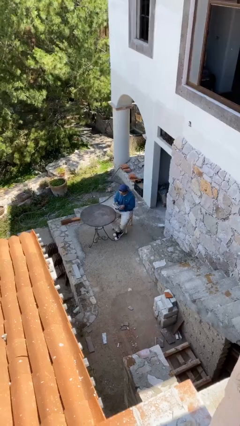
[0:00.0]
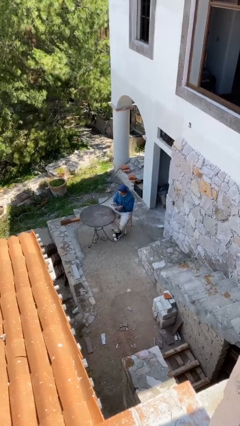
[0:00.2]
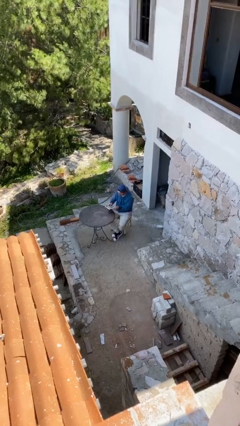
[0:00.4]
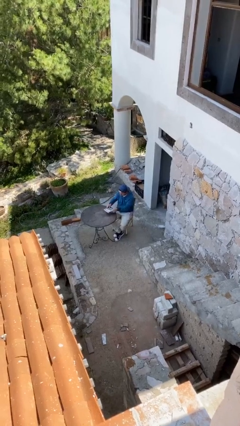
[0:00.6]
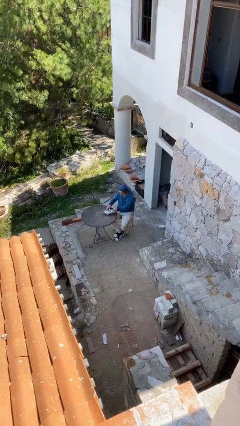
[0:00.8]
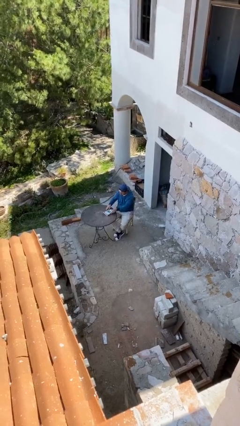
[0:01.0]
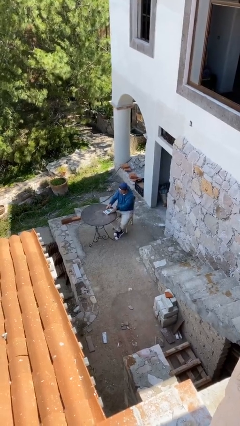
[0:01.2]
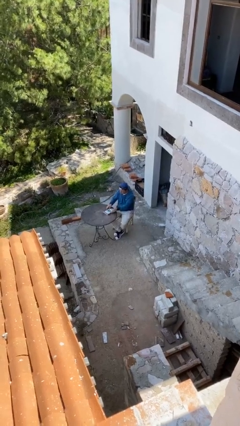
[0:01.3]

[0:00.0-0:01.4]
person puts down object on table

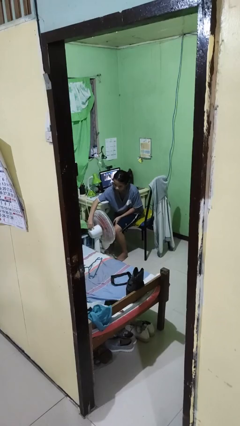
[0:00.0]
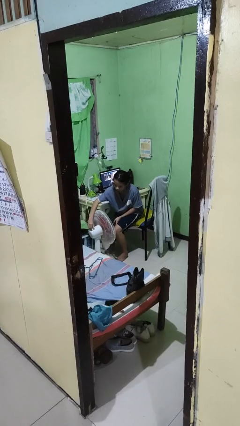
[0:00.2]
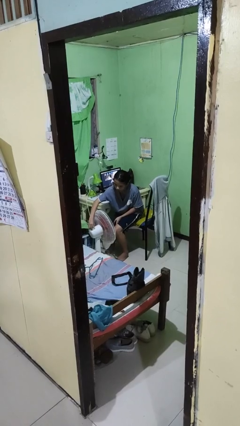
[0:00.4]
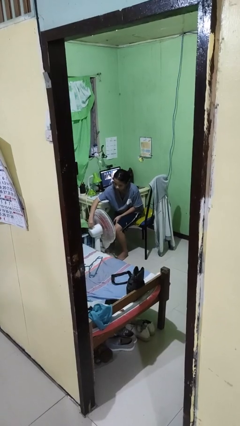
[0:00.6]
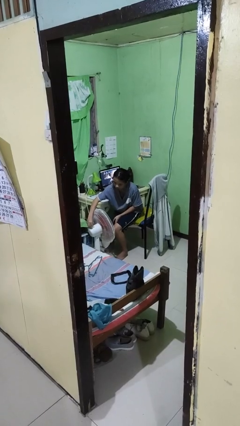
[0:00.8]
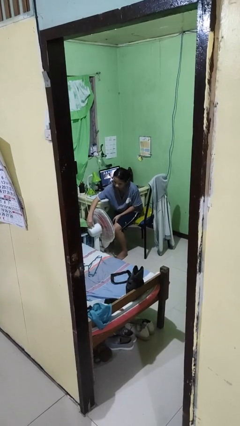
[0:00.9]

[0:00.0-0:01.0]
person turns off fan

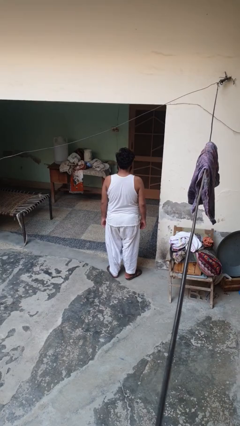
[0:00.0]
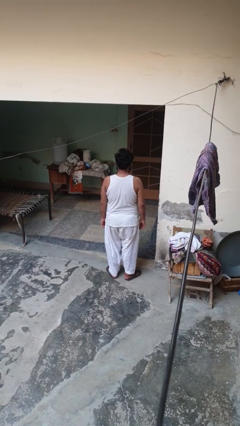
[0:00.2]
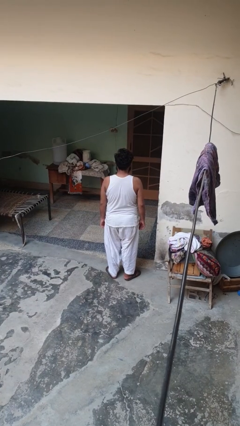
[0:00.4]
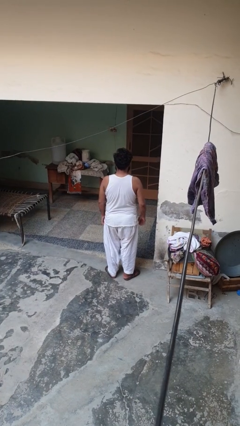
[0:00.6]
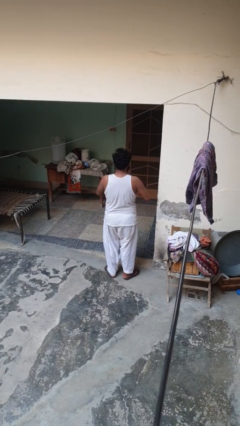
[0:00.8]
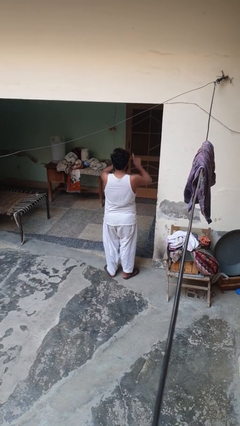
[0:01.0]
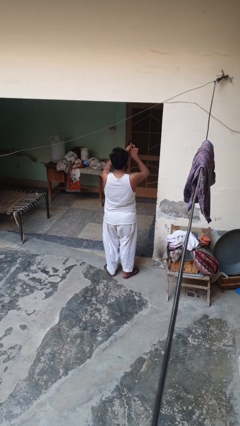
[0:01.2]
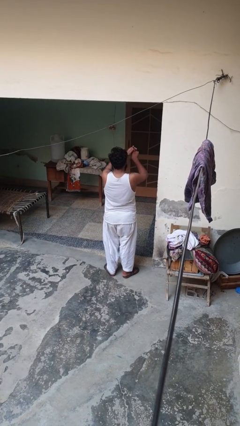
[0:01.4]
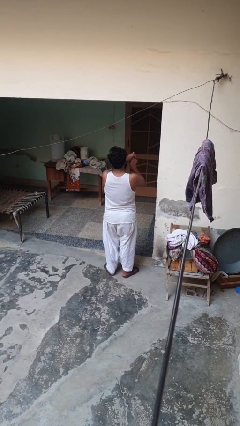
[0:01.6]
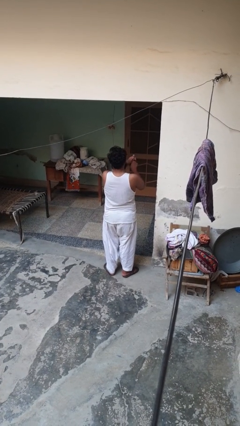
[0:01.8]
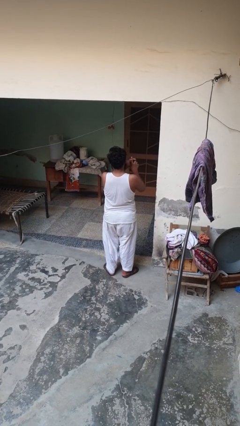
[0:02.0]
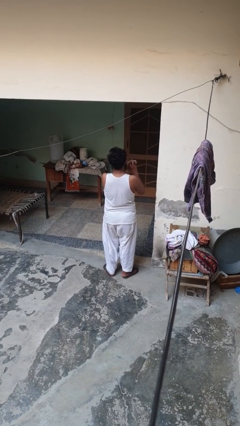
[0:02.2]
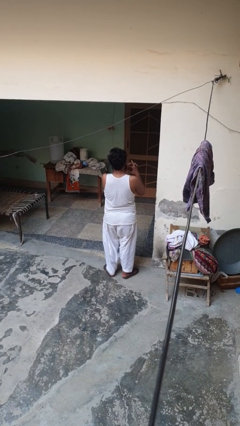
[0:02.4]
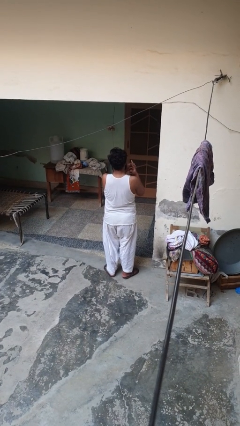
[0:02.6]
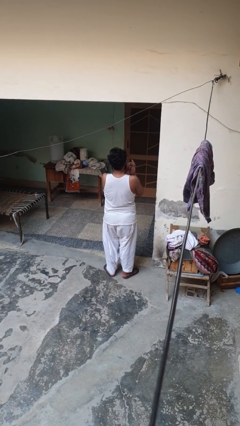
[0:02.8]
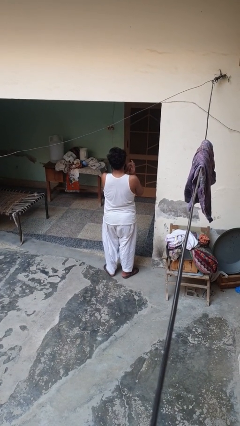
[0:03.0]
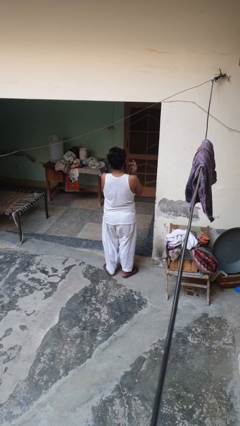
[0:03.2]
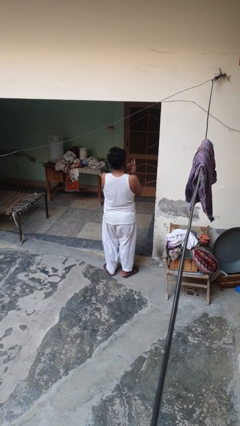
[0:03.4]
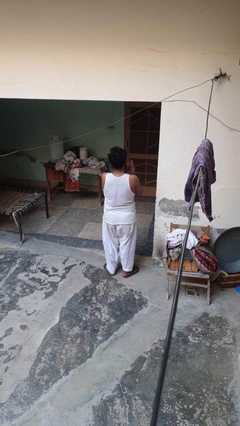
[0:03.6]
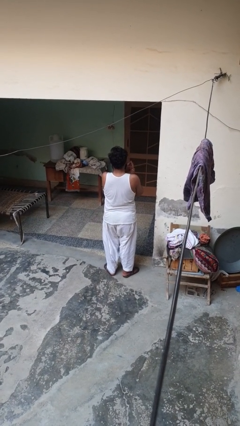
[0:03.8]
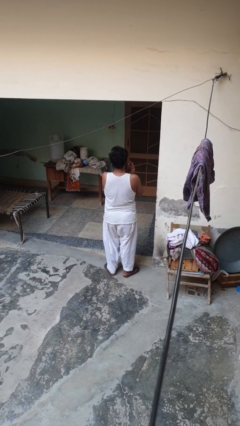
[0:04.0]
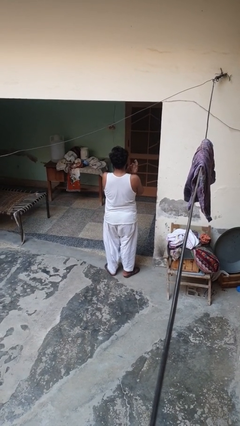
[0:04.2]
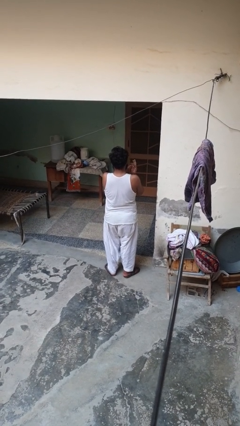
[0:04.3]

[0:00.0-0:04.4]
person snaps fingers

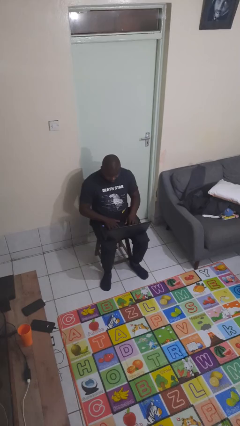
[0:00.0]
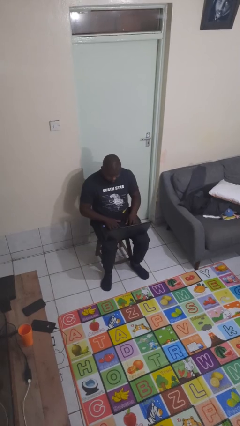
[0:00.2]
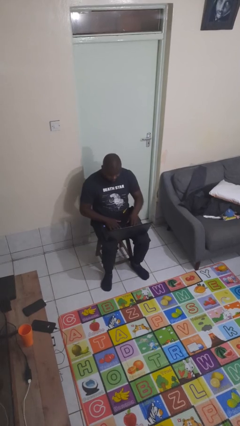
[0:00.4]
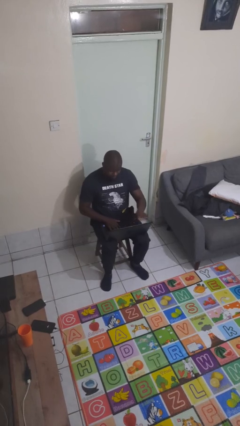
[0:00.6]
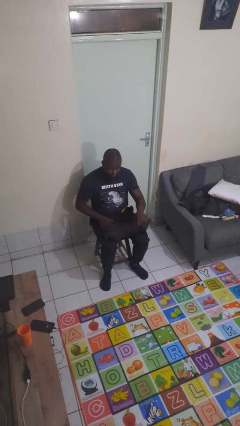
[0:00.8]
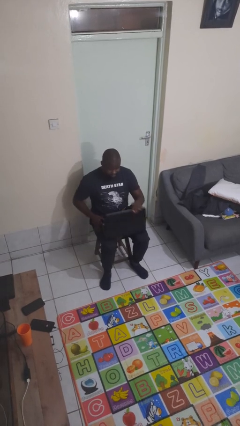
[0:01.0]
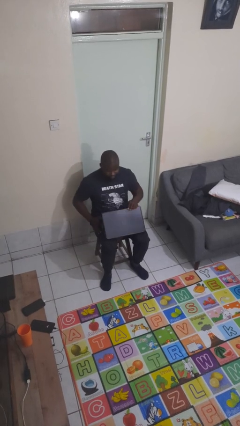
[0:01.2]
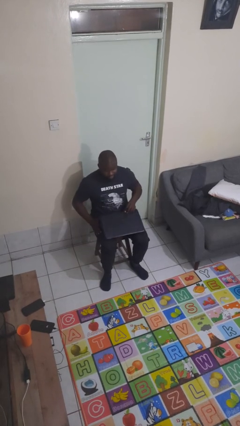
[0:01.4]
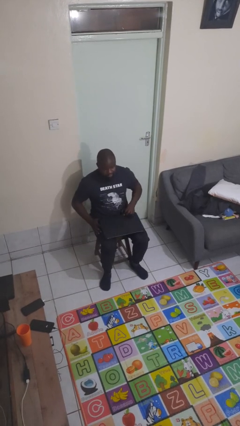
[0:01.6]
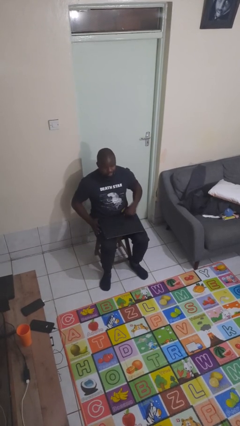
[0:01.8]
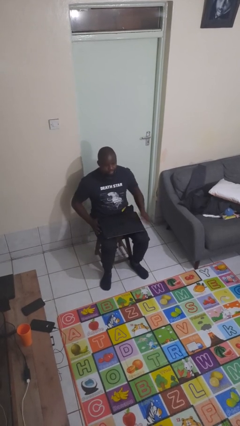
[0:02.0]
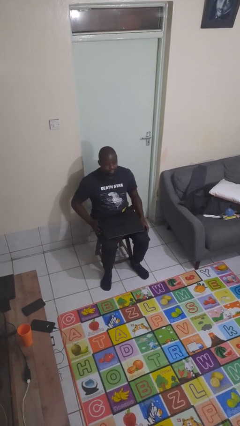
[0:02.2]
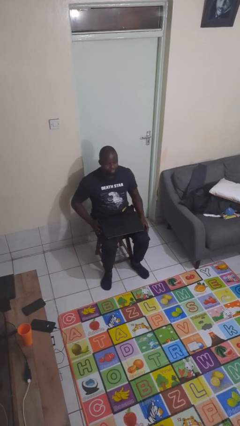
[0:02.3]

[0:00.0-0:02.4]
person closes laptop

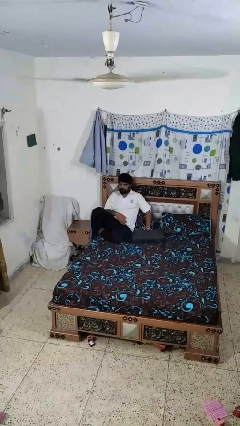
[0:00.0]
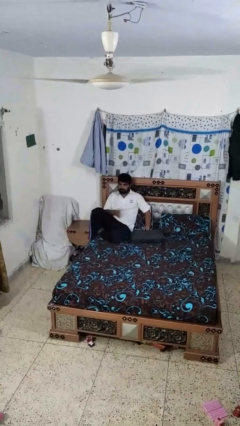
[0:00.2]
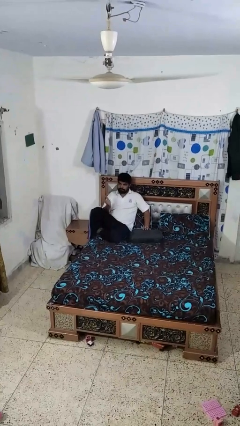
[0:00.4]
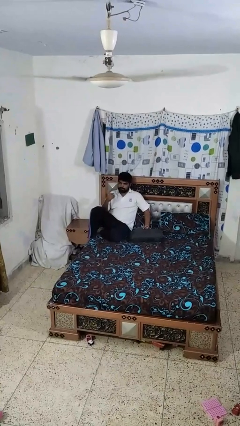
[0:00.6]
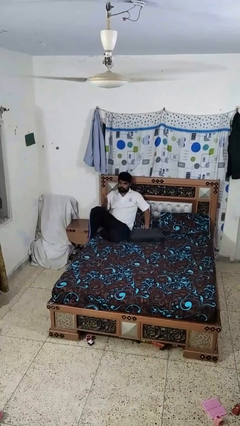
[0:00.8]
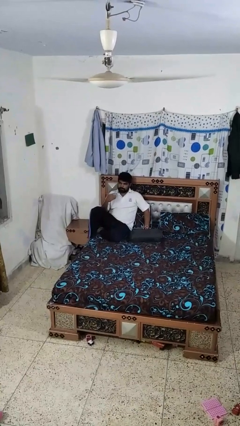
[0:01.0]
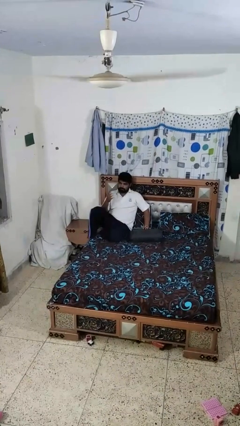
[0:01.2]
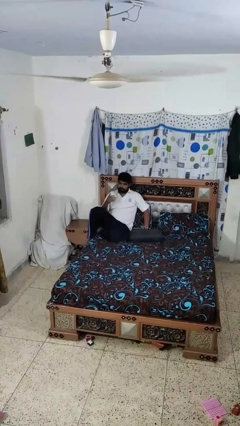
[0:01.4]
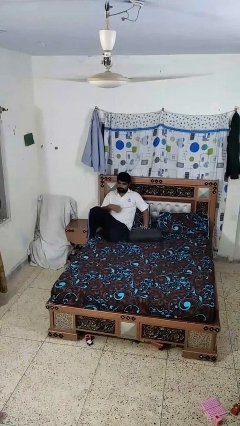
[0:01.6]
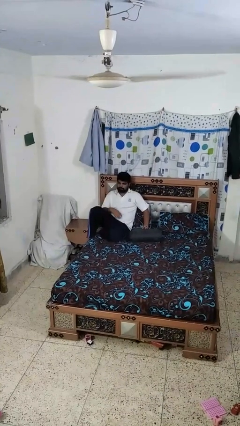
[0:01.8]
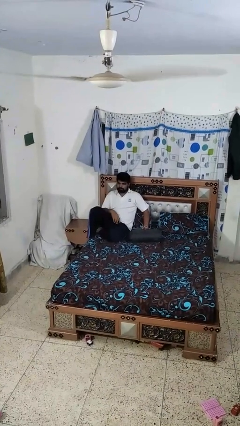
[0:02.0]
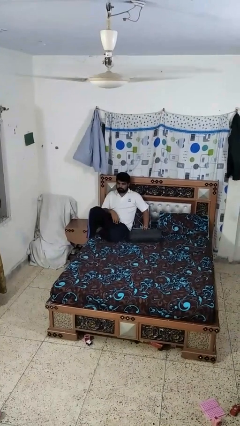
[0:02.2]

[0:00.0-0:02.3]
person gestures come here

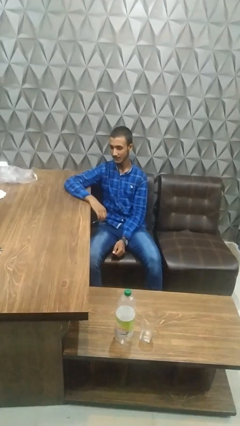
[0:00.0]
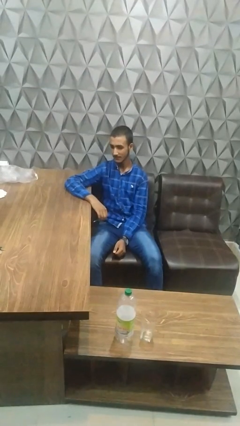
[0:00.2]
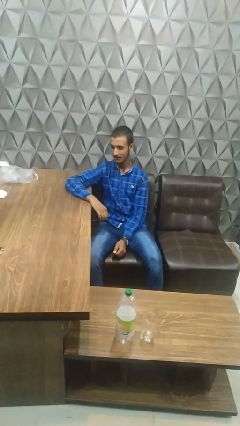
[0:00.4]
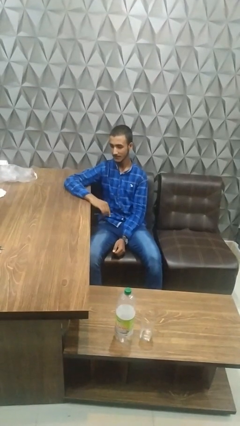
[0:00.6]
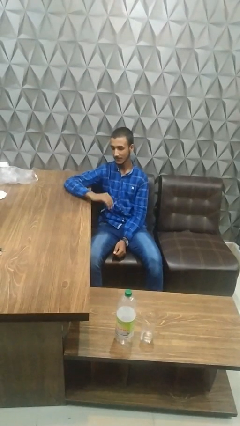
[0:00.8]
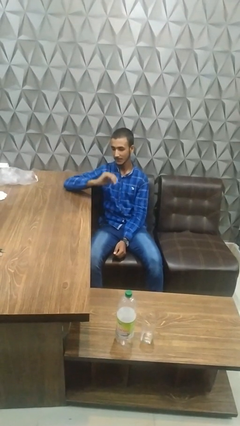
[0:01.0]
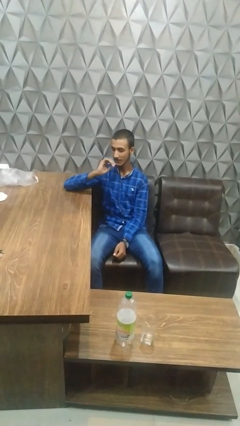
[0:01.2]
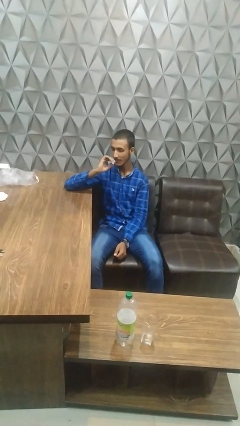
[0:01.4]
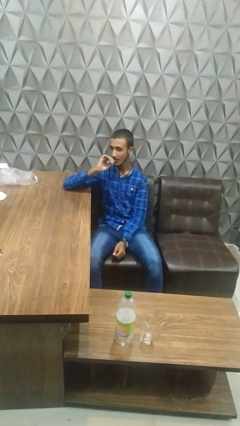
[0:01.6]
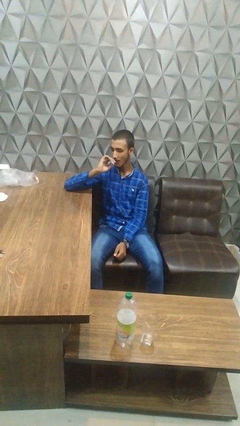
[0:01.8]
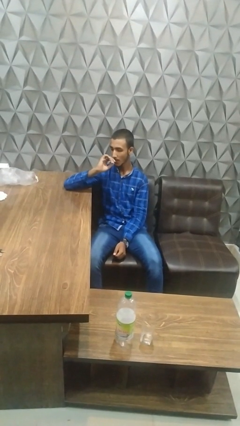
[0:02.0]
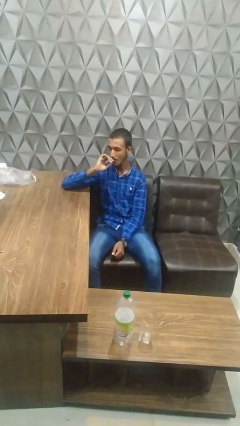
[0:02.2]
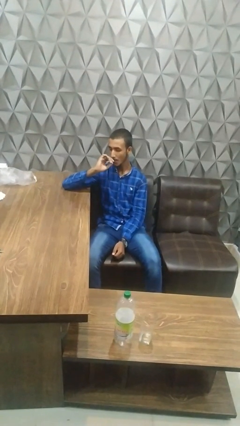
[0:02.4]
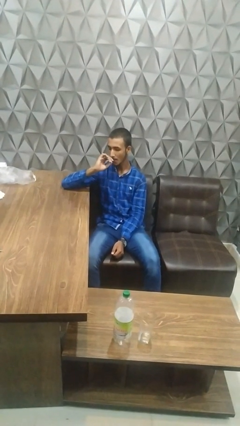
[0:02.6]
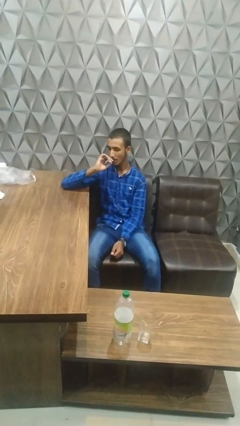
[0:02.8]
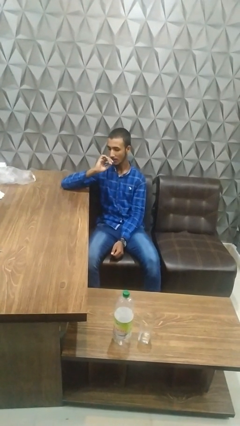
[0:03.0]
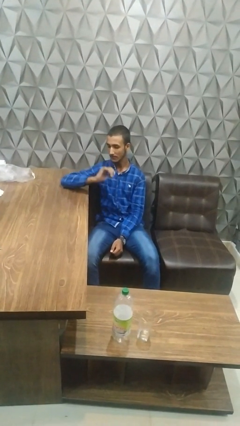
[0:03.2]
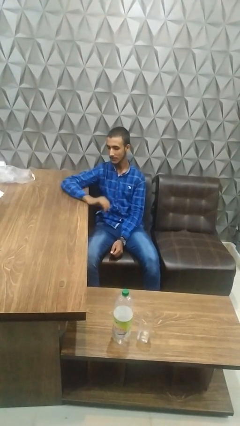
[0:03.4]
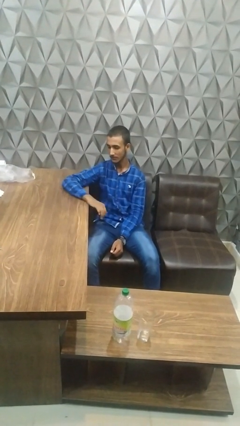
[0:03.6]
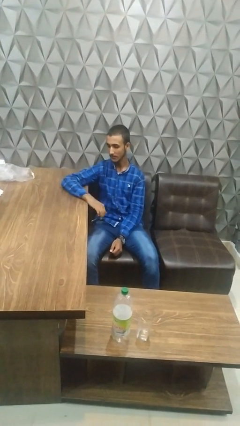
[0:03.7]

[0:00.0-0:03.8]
person vapes

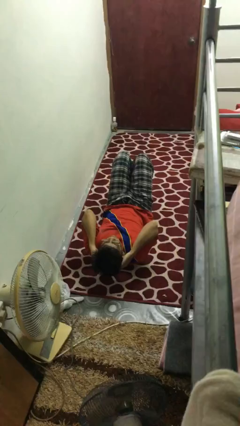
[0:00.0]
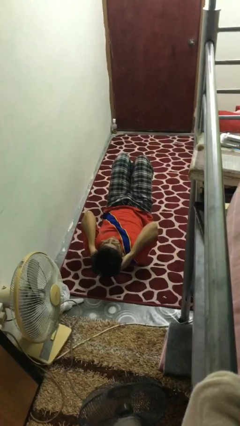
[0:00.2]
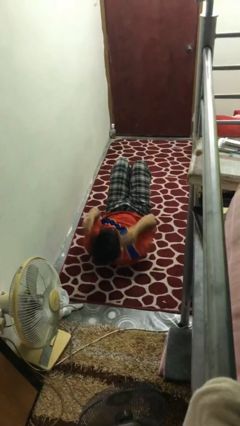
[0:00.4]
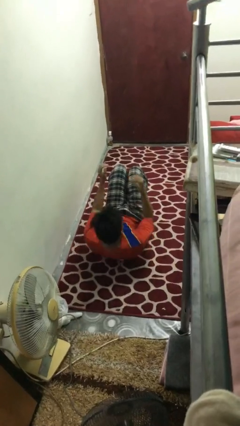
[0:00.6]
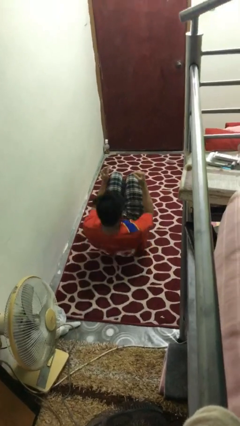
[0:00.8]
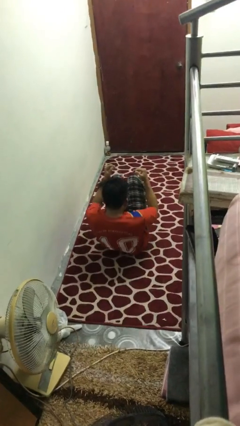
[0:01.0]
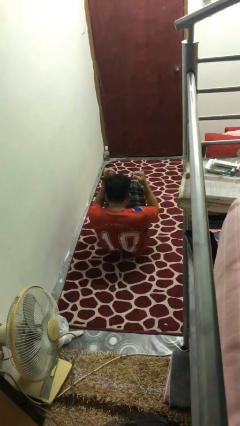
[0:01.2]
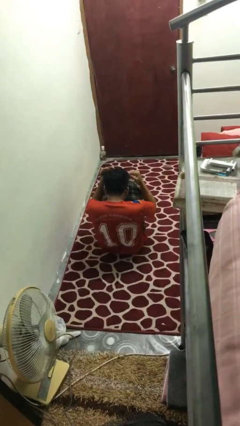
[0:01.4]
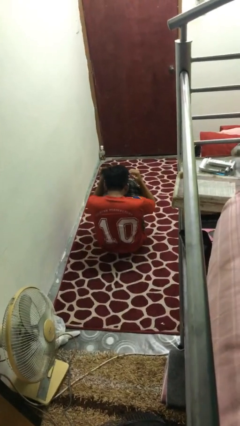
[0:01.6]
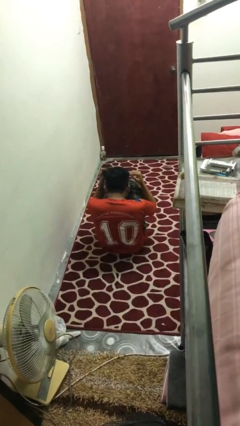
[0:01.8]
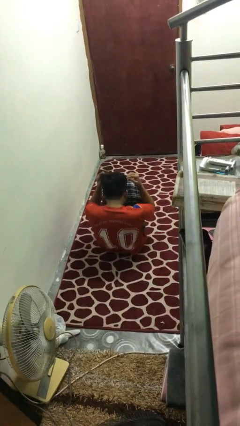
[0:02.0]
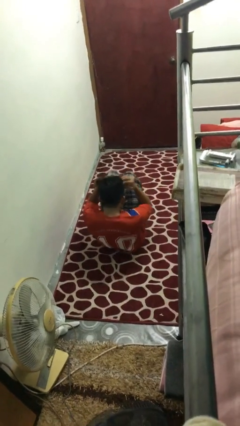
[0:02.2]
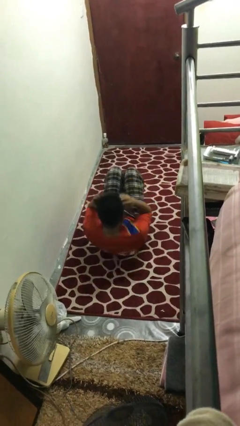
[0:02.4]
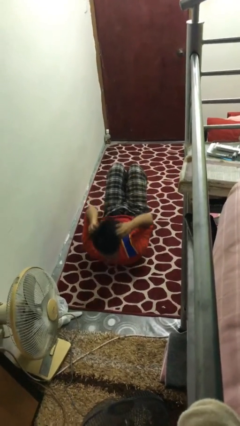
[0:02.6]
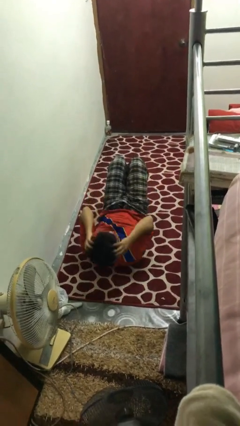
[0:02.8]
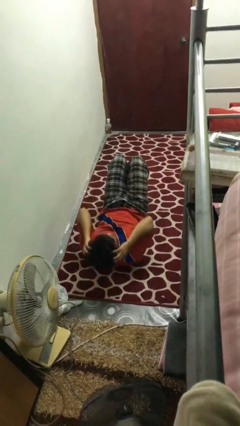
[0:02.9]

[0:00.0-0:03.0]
person exercises with situp
